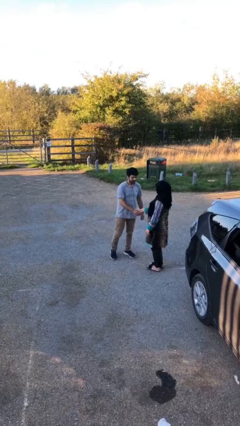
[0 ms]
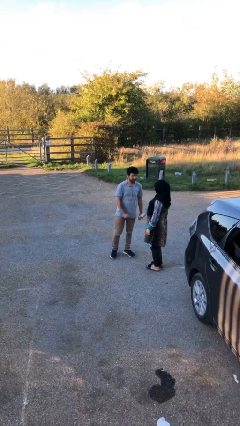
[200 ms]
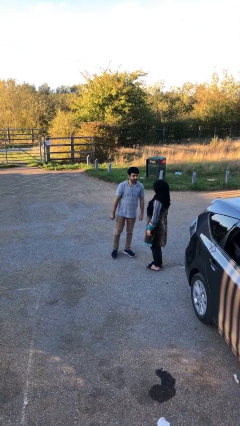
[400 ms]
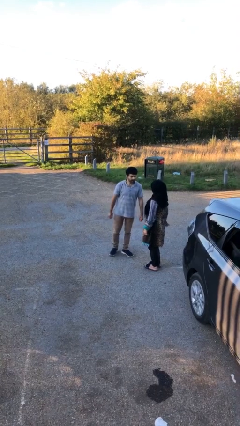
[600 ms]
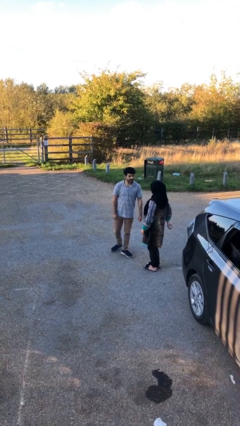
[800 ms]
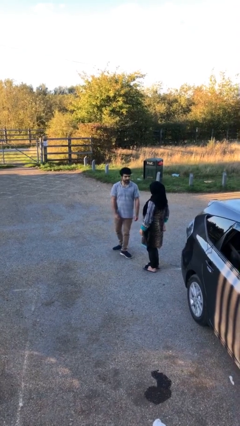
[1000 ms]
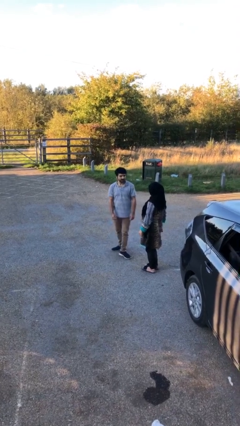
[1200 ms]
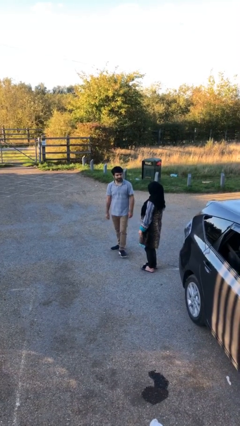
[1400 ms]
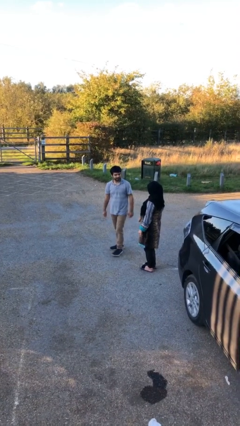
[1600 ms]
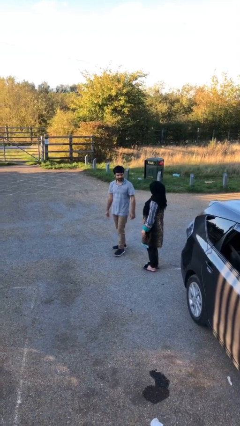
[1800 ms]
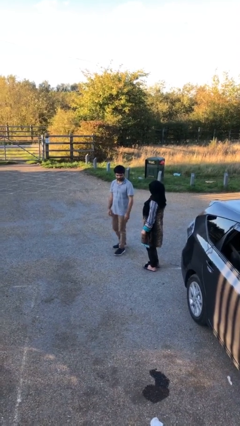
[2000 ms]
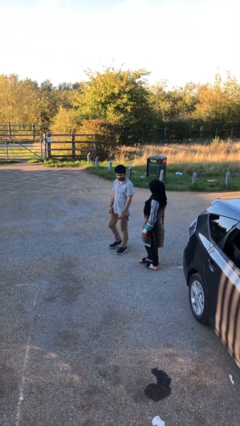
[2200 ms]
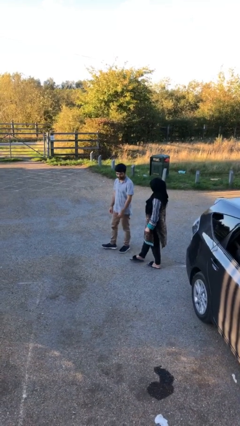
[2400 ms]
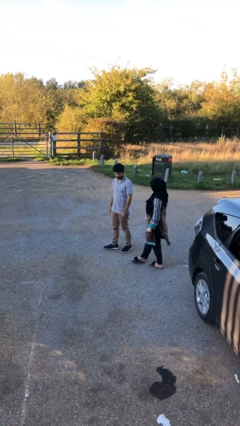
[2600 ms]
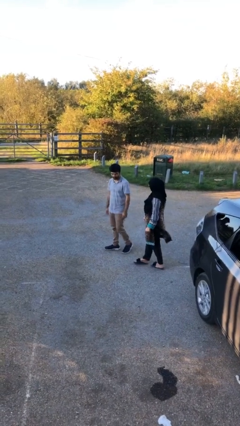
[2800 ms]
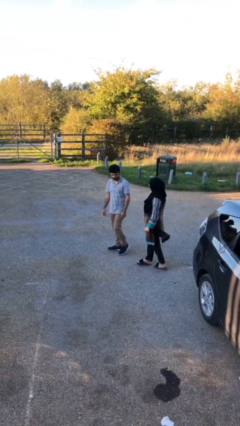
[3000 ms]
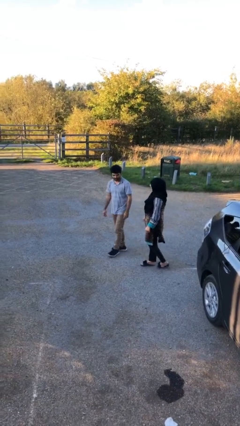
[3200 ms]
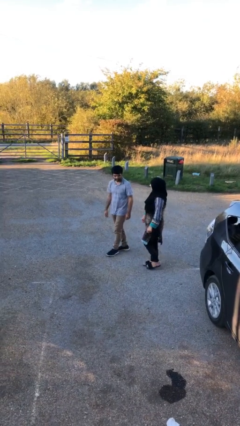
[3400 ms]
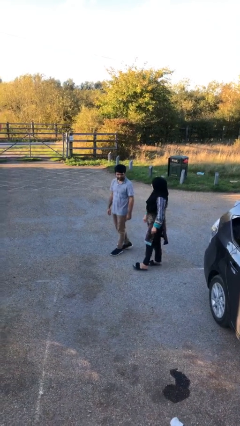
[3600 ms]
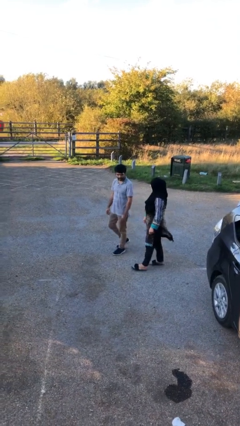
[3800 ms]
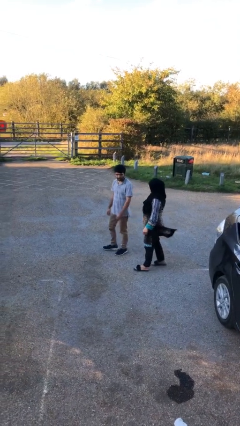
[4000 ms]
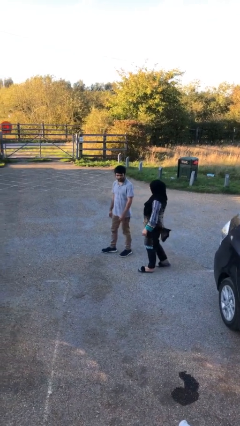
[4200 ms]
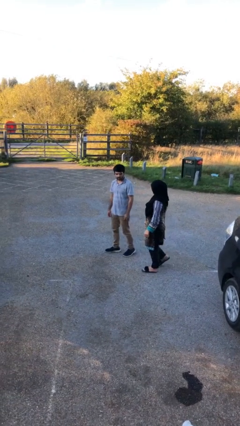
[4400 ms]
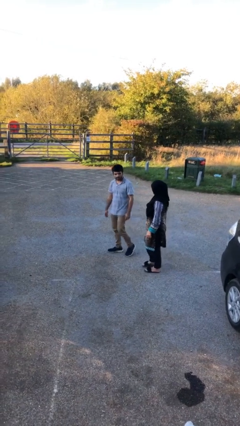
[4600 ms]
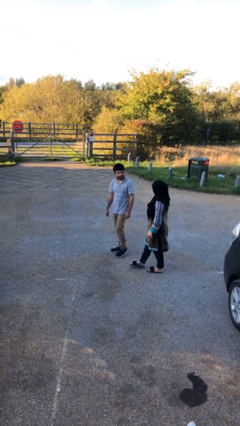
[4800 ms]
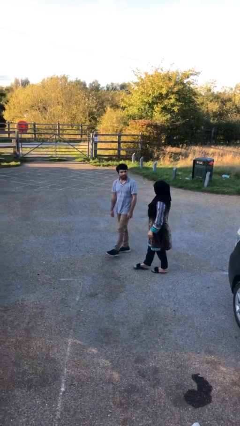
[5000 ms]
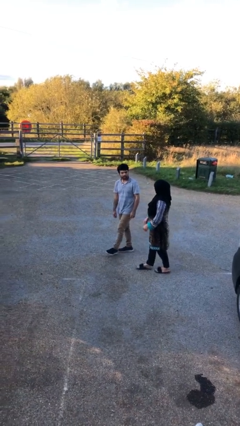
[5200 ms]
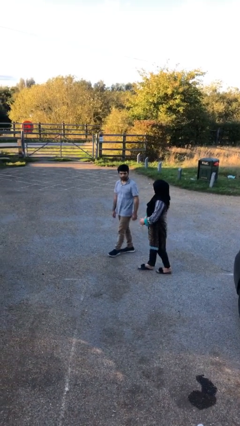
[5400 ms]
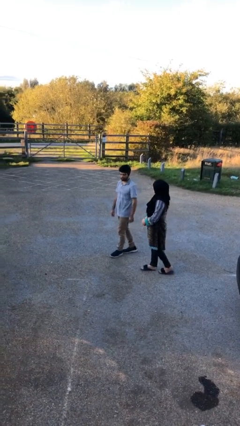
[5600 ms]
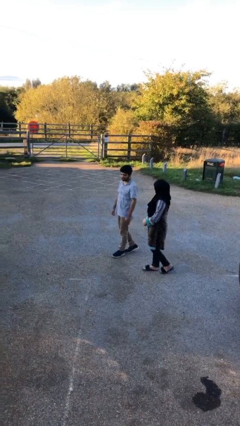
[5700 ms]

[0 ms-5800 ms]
person talks to person

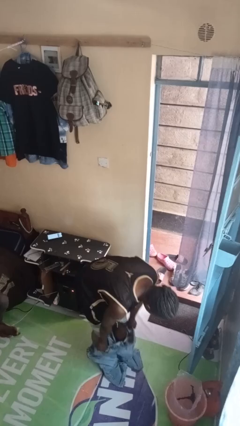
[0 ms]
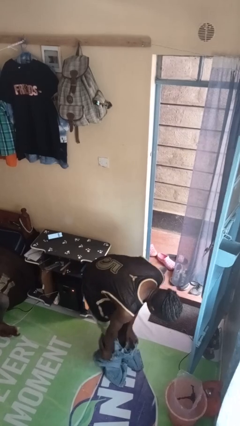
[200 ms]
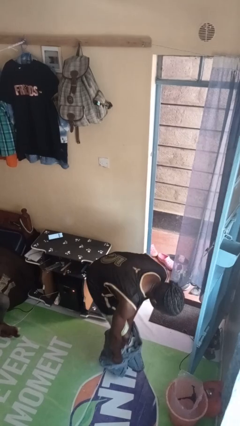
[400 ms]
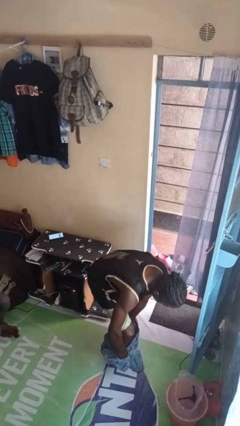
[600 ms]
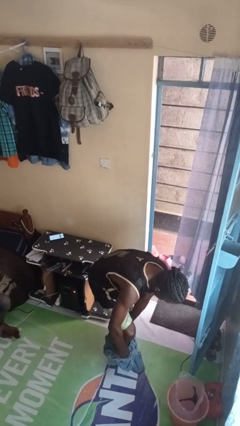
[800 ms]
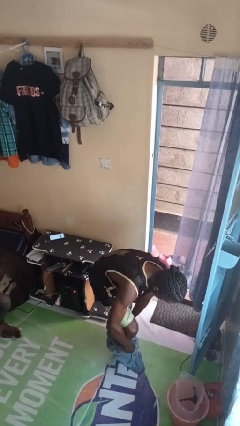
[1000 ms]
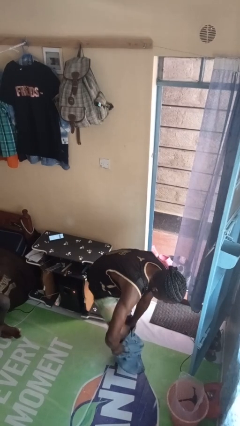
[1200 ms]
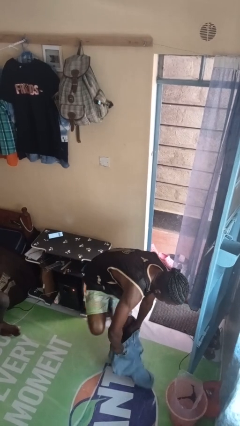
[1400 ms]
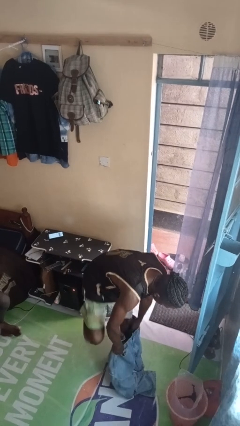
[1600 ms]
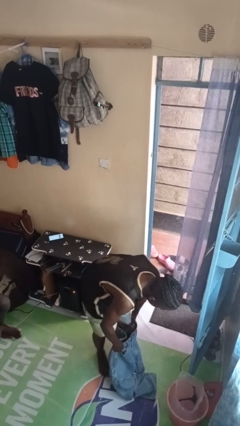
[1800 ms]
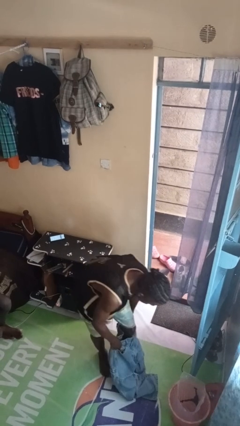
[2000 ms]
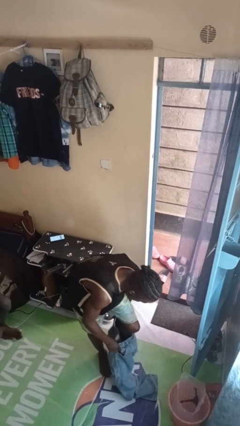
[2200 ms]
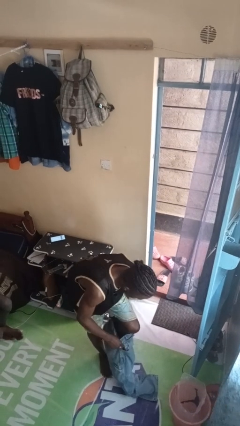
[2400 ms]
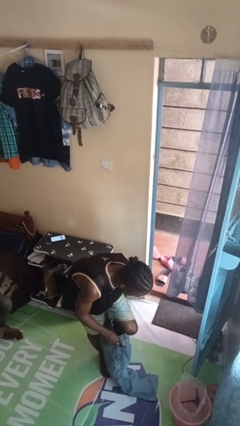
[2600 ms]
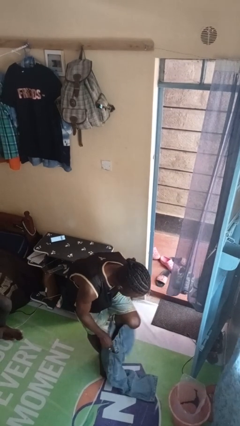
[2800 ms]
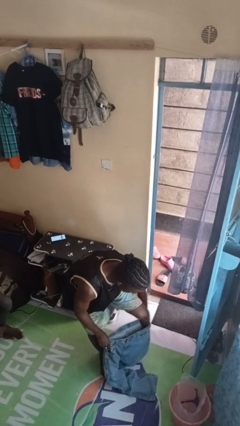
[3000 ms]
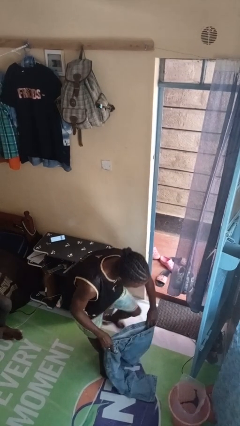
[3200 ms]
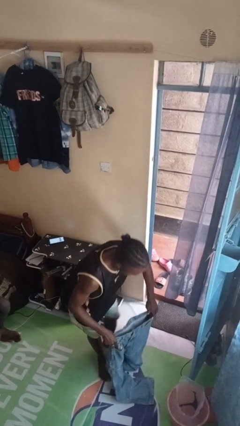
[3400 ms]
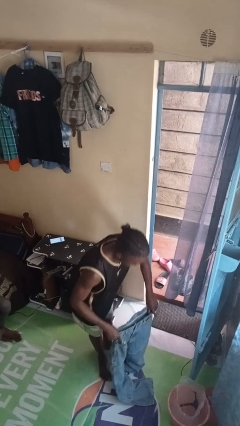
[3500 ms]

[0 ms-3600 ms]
person takes off pants

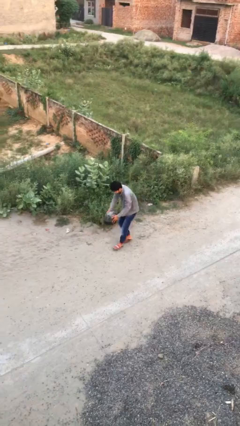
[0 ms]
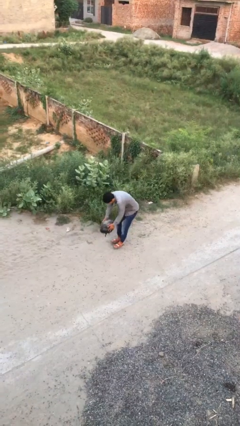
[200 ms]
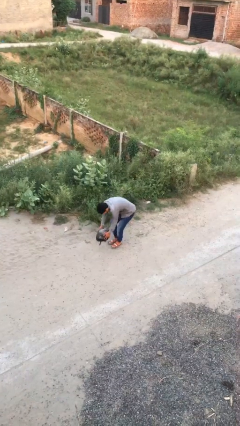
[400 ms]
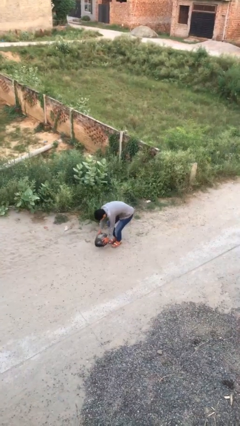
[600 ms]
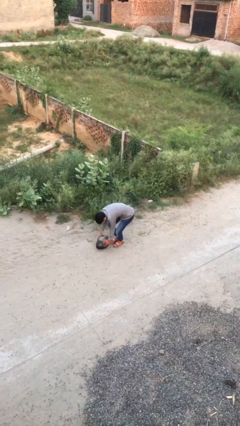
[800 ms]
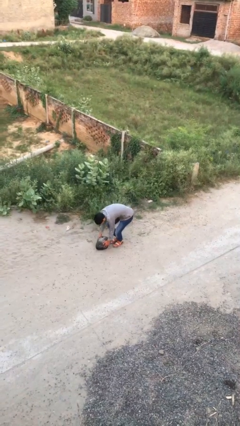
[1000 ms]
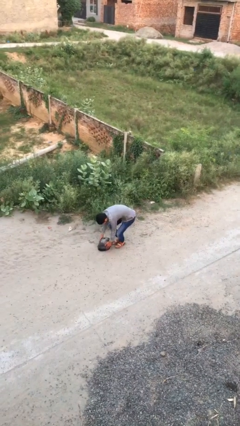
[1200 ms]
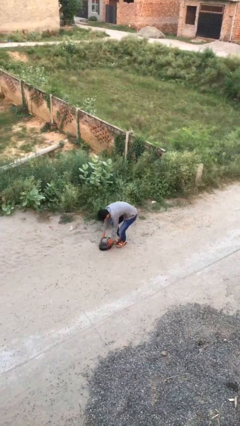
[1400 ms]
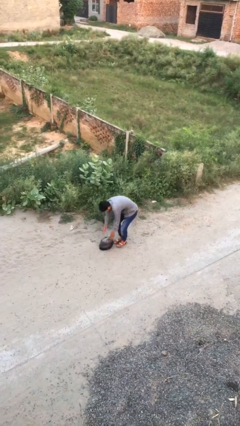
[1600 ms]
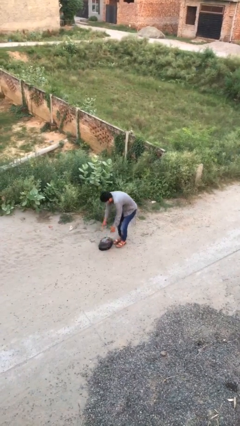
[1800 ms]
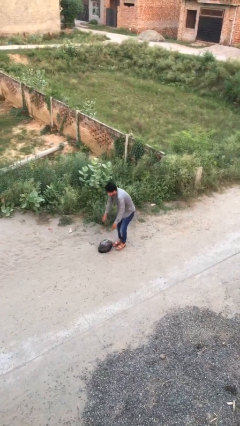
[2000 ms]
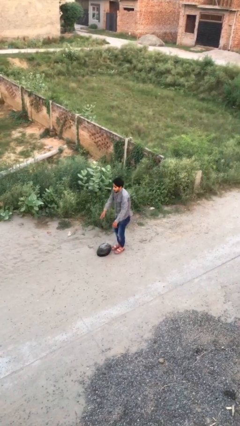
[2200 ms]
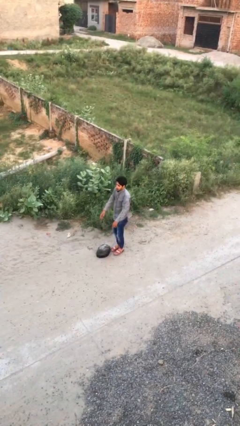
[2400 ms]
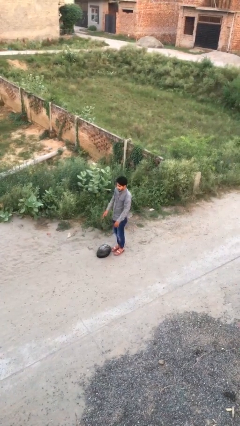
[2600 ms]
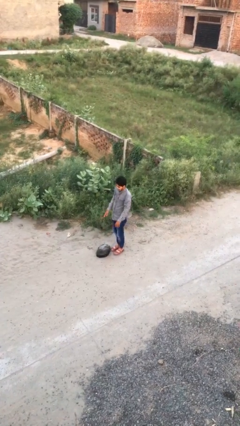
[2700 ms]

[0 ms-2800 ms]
person puts down object on floor

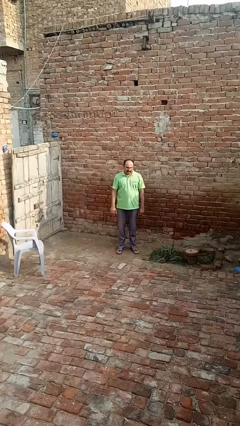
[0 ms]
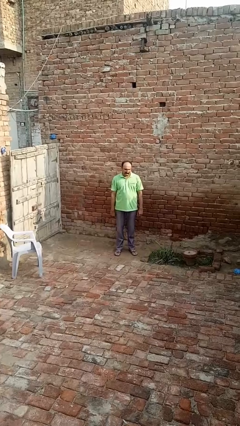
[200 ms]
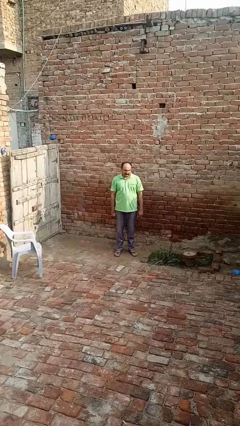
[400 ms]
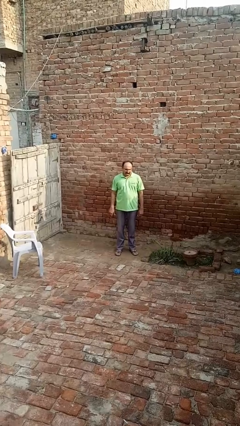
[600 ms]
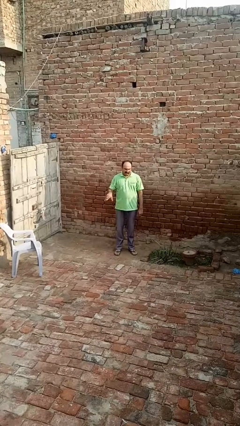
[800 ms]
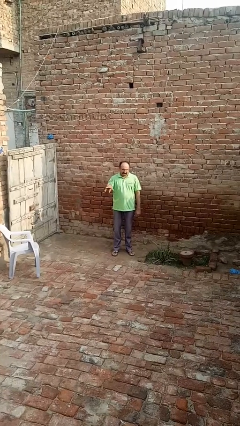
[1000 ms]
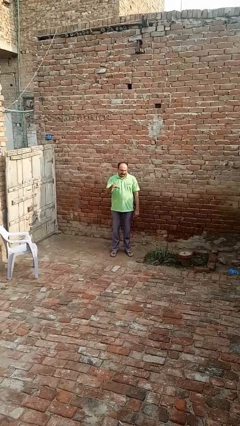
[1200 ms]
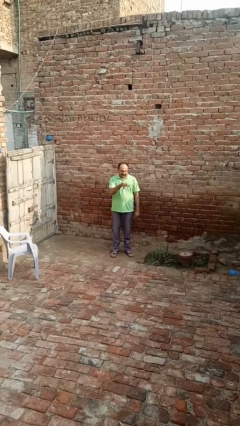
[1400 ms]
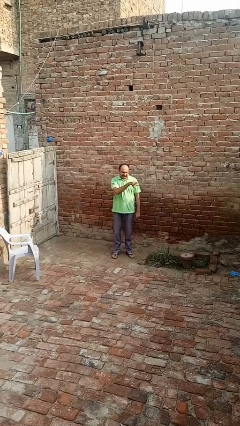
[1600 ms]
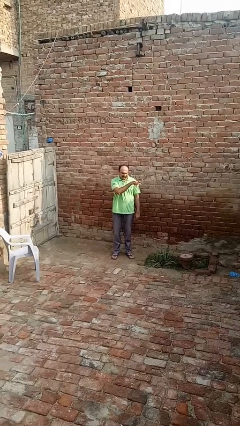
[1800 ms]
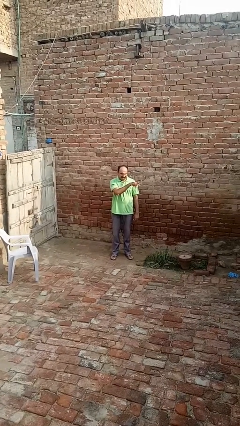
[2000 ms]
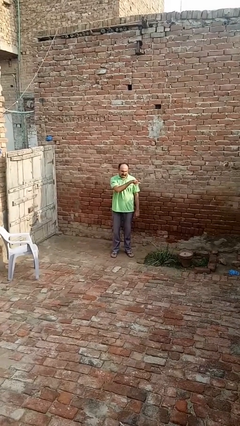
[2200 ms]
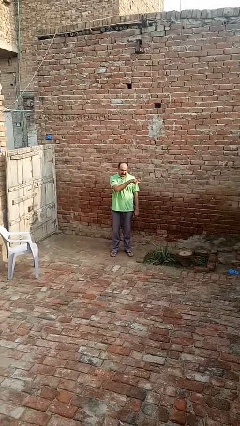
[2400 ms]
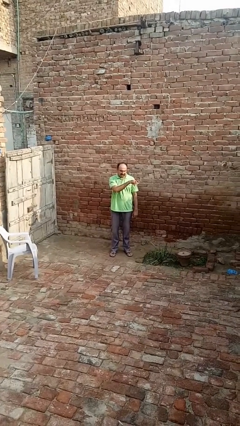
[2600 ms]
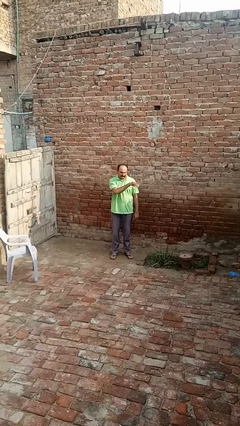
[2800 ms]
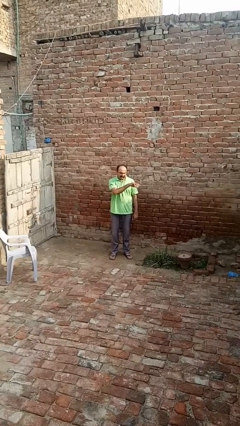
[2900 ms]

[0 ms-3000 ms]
person gestures swipe left

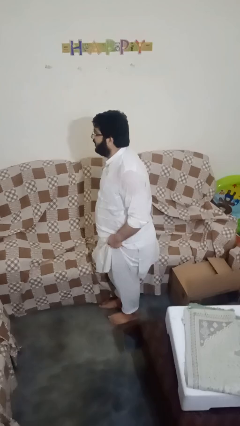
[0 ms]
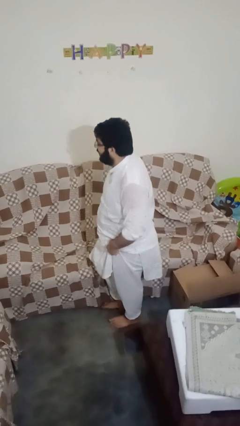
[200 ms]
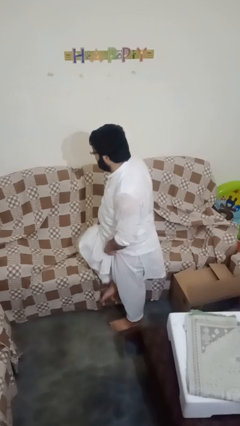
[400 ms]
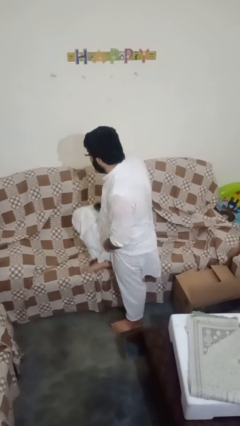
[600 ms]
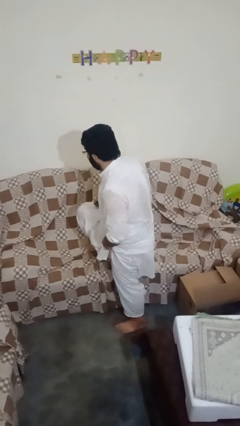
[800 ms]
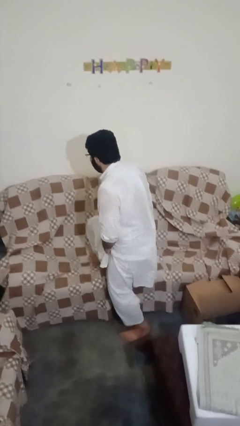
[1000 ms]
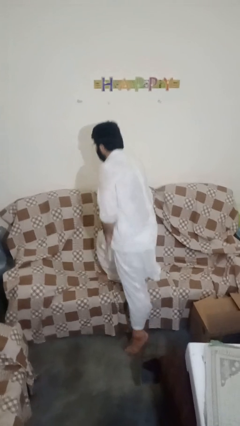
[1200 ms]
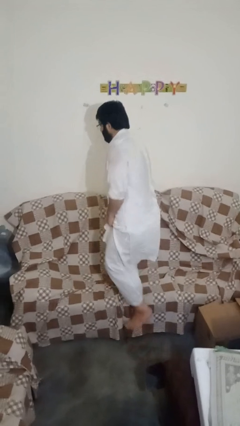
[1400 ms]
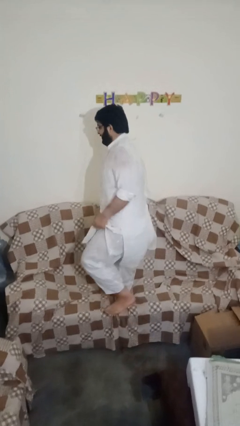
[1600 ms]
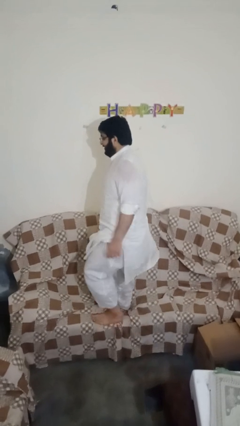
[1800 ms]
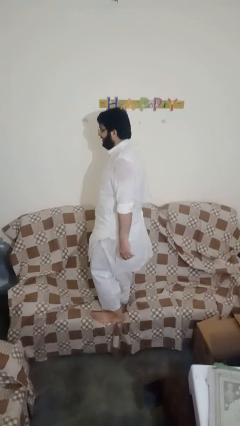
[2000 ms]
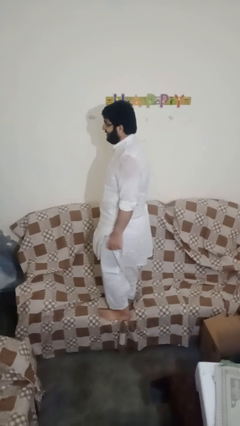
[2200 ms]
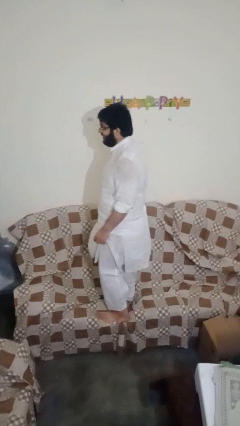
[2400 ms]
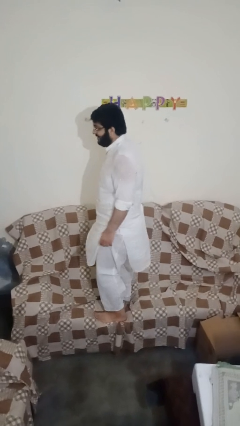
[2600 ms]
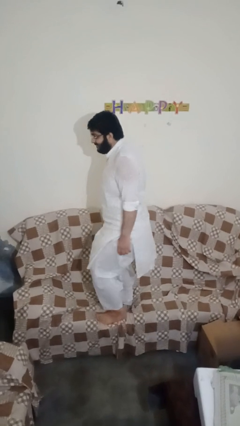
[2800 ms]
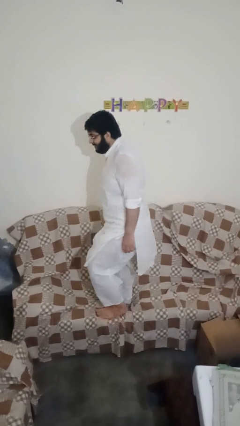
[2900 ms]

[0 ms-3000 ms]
person climbs on couch
